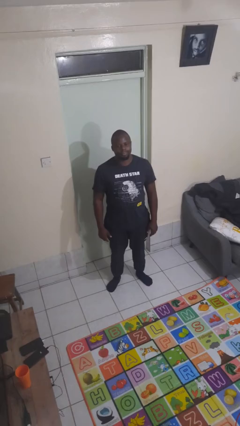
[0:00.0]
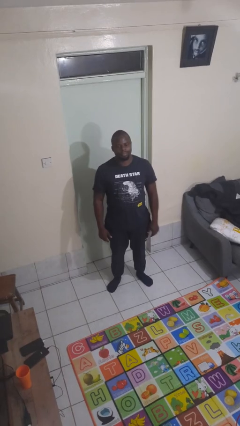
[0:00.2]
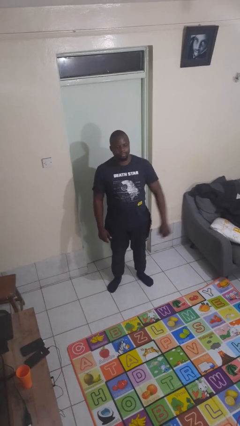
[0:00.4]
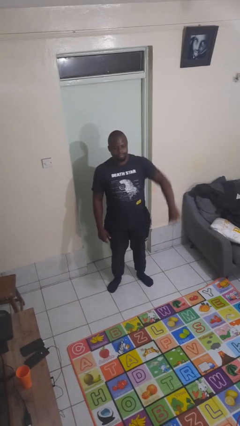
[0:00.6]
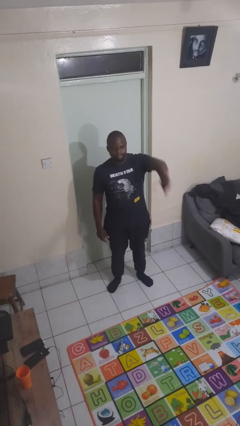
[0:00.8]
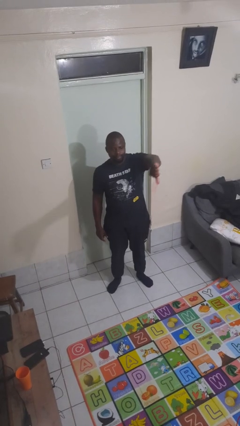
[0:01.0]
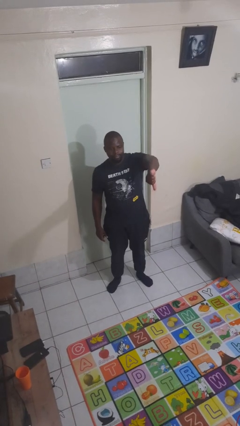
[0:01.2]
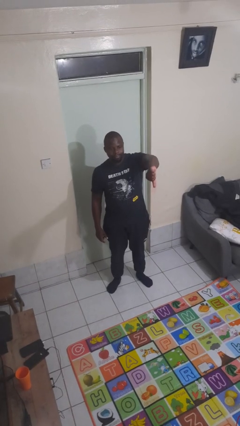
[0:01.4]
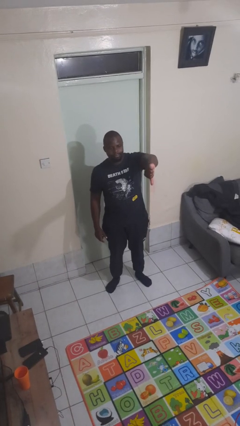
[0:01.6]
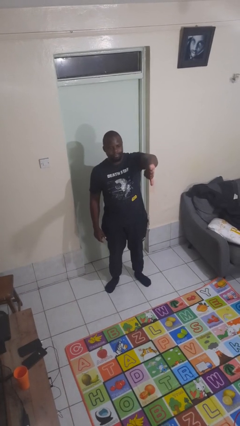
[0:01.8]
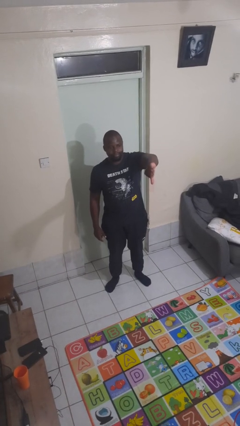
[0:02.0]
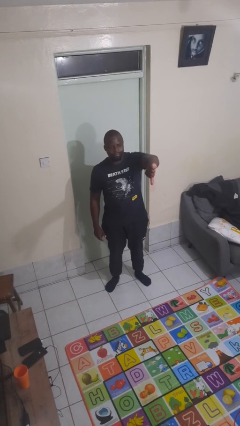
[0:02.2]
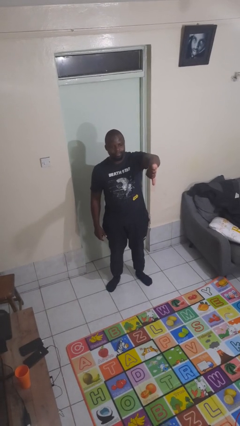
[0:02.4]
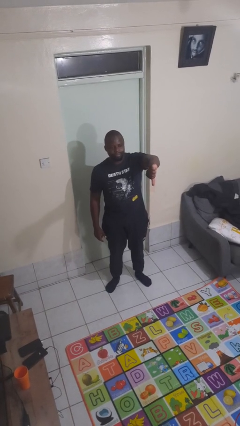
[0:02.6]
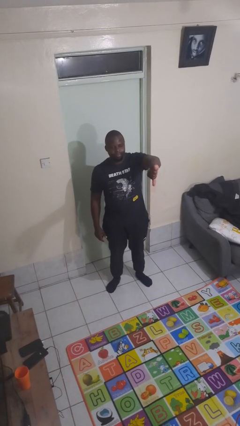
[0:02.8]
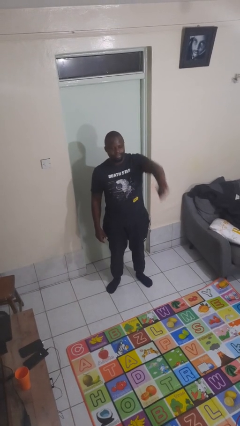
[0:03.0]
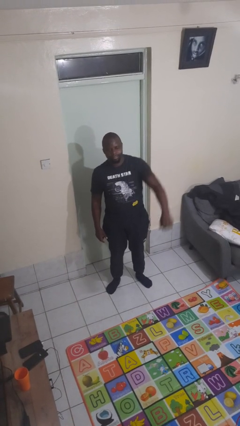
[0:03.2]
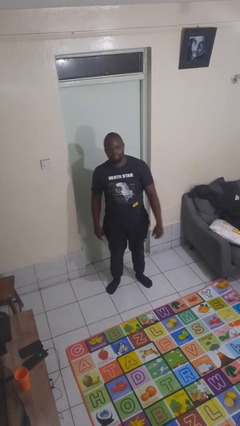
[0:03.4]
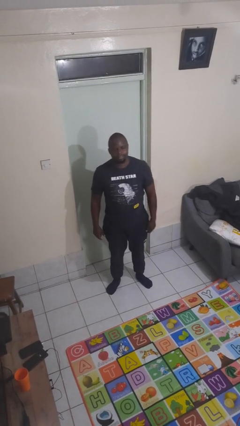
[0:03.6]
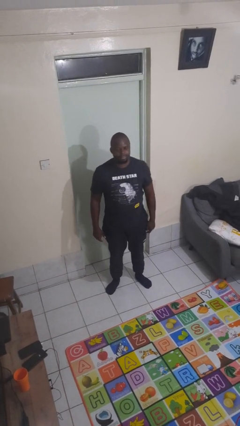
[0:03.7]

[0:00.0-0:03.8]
person gestures thumbs down

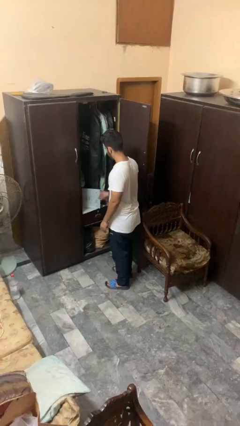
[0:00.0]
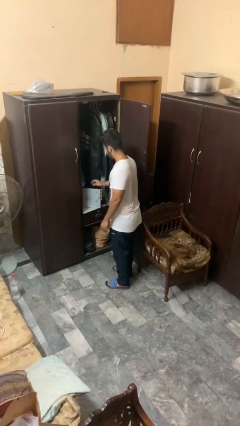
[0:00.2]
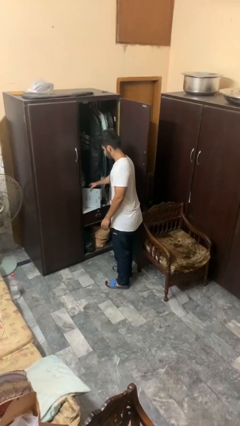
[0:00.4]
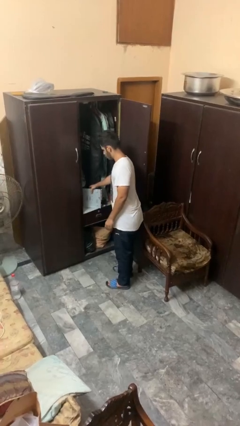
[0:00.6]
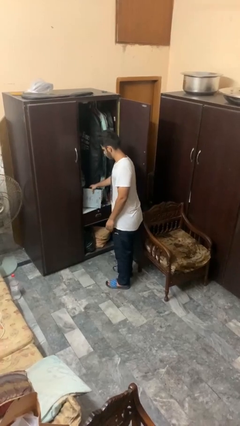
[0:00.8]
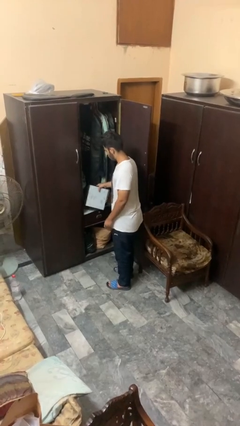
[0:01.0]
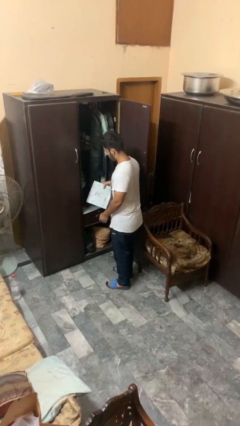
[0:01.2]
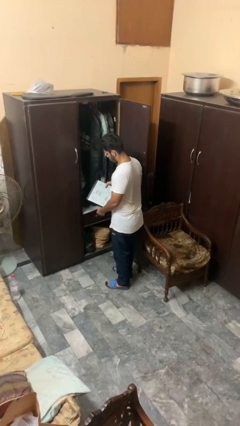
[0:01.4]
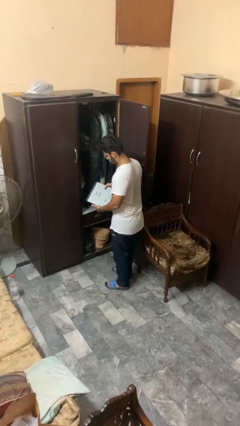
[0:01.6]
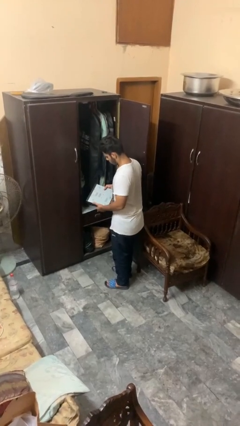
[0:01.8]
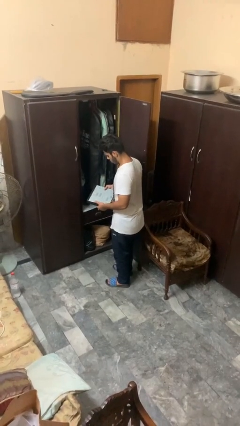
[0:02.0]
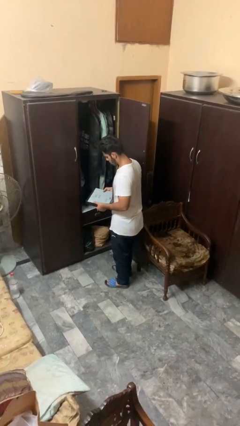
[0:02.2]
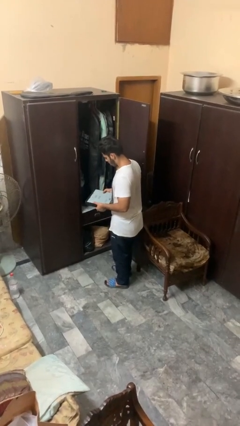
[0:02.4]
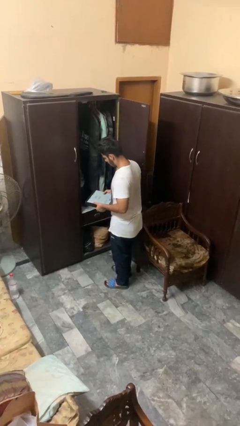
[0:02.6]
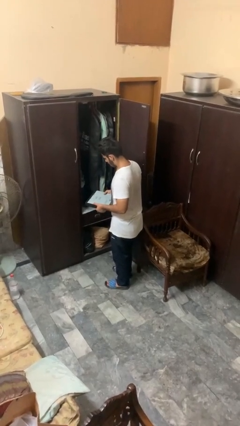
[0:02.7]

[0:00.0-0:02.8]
person picks up object from cabinet

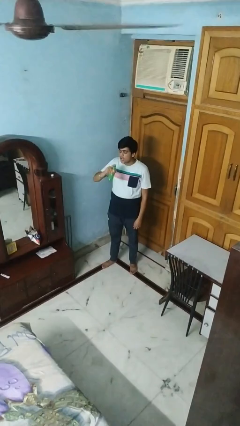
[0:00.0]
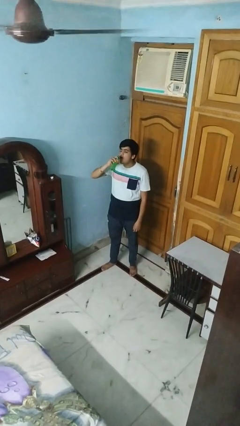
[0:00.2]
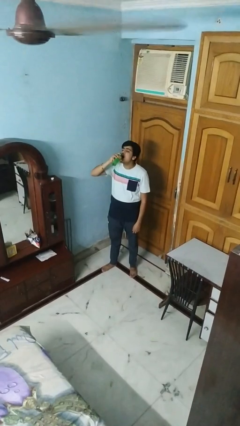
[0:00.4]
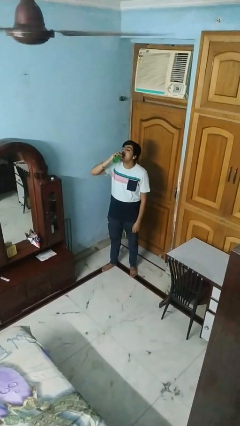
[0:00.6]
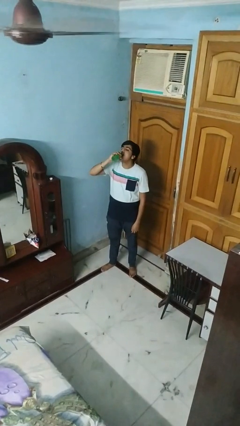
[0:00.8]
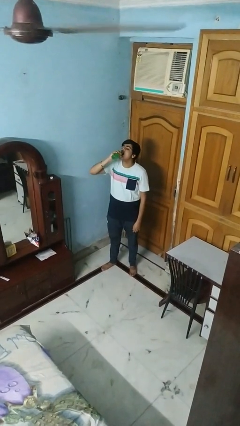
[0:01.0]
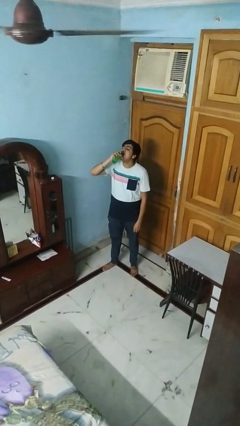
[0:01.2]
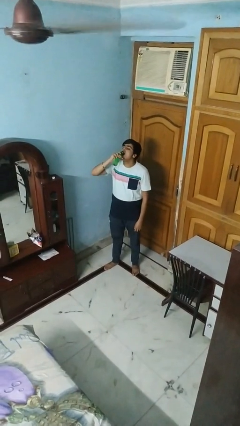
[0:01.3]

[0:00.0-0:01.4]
person drinks from bottle

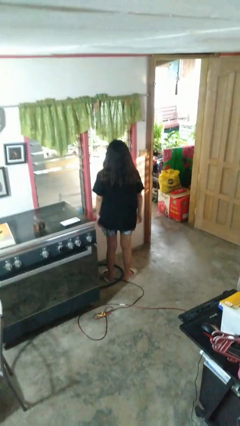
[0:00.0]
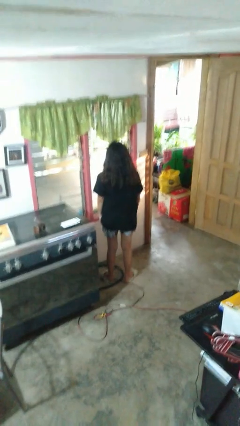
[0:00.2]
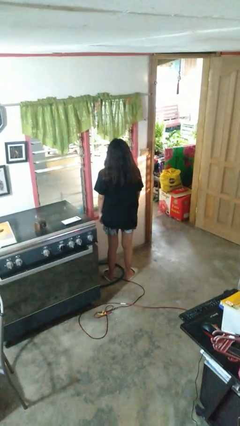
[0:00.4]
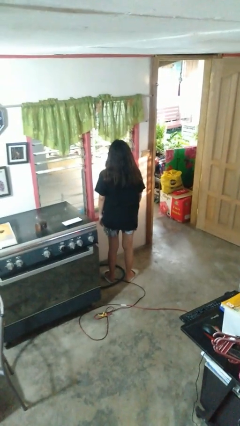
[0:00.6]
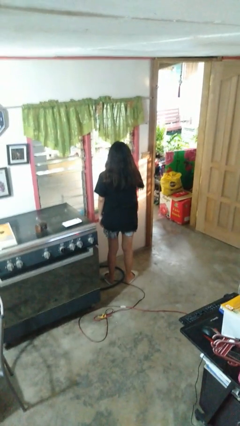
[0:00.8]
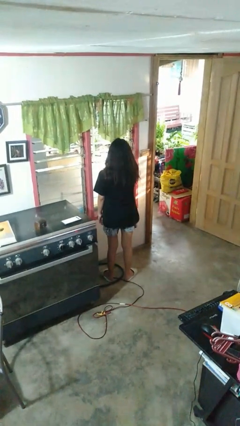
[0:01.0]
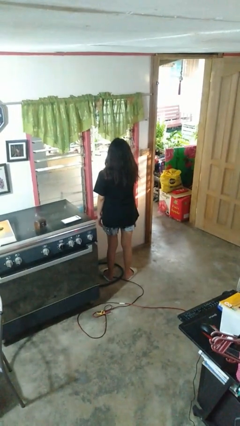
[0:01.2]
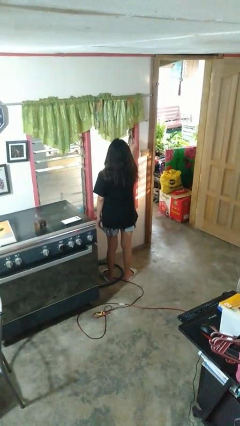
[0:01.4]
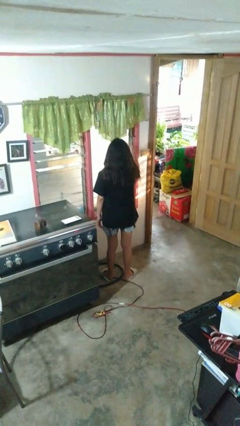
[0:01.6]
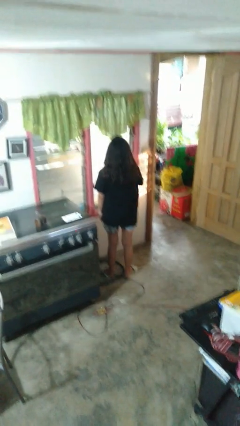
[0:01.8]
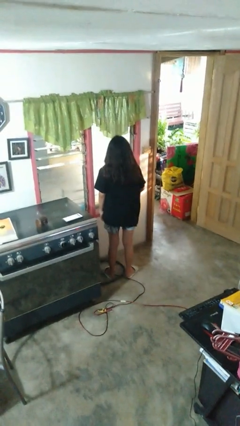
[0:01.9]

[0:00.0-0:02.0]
person closes home window

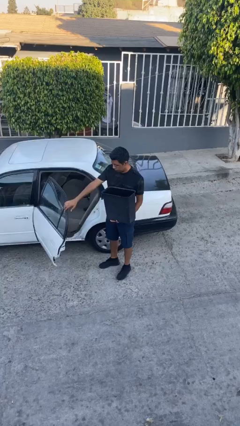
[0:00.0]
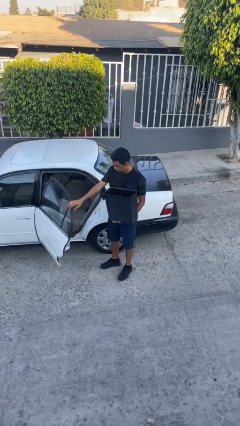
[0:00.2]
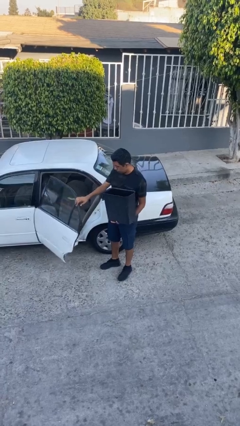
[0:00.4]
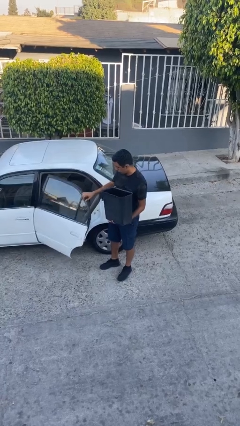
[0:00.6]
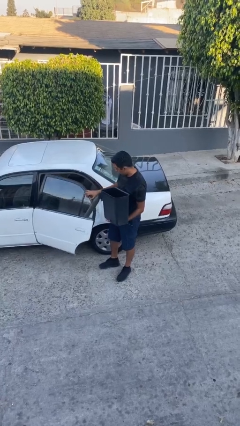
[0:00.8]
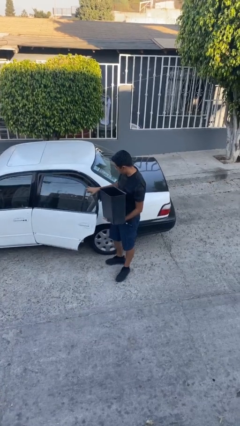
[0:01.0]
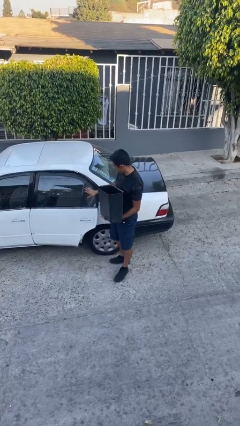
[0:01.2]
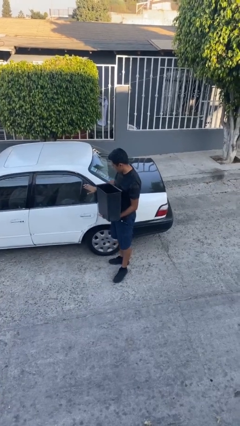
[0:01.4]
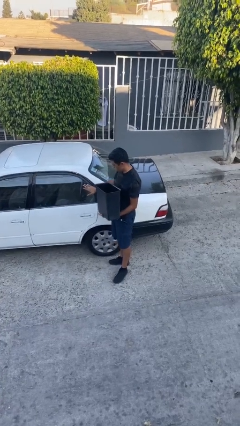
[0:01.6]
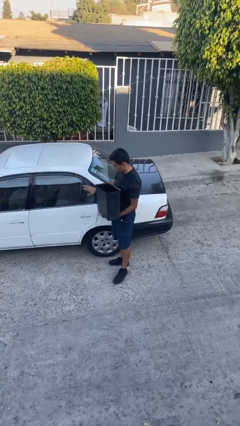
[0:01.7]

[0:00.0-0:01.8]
person closes car door

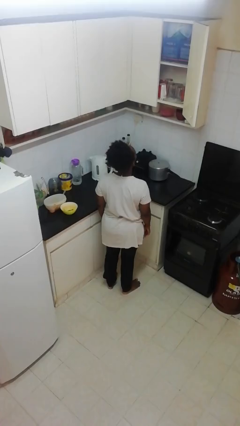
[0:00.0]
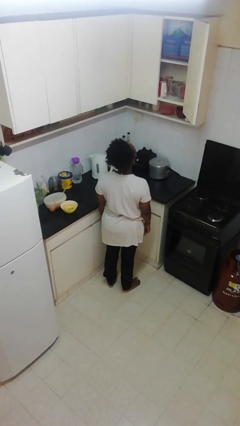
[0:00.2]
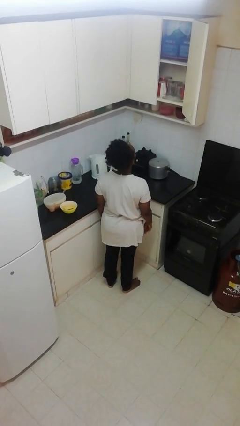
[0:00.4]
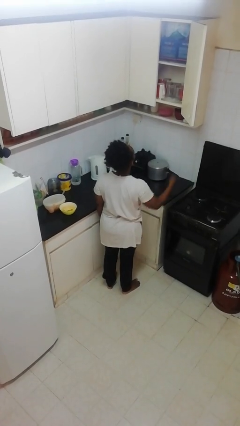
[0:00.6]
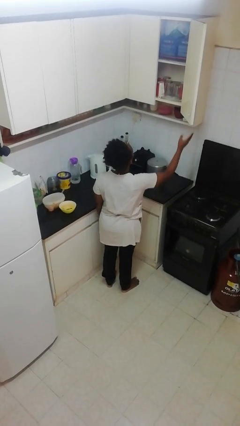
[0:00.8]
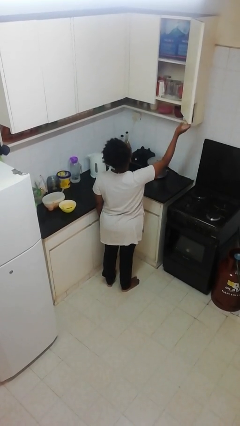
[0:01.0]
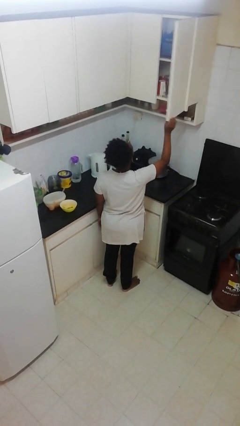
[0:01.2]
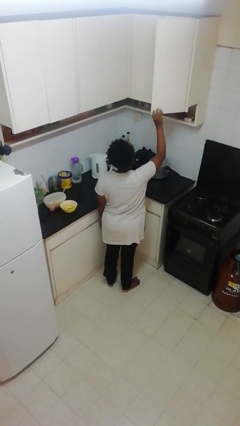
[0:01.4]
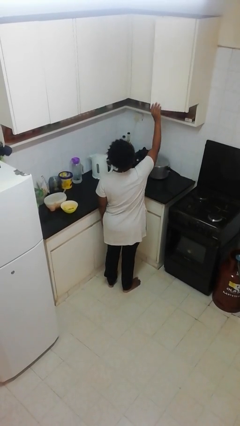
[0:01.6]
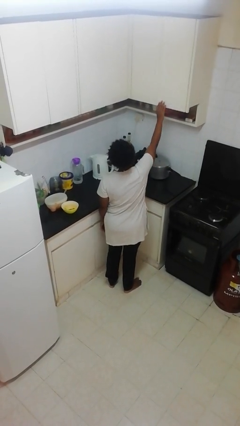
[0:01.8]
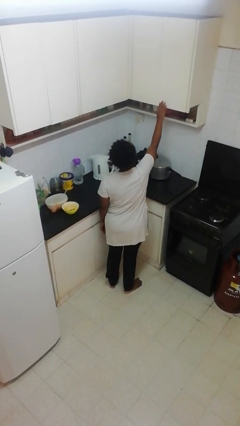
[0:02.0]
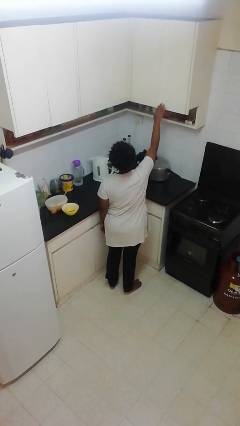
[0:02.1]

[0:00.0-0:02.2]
person closes cabinet

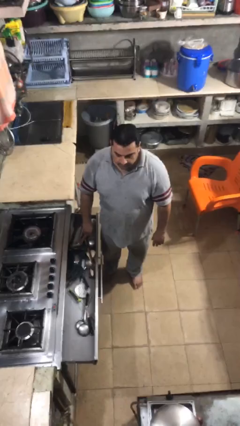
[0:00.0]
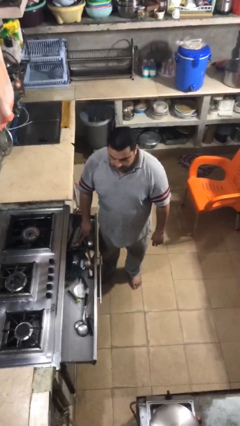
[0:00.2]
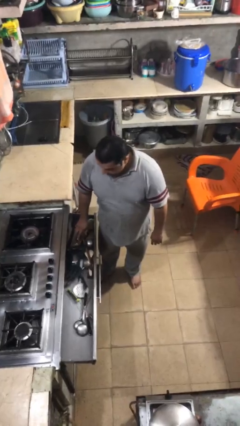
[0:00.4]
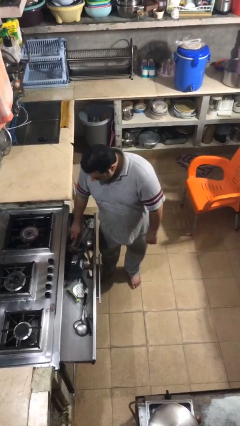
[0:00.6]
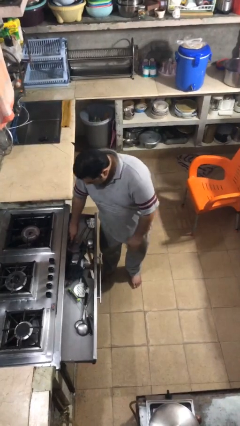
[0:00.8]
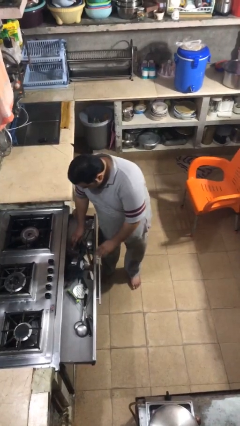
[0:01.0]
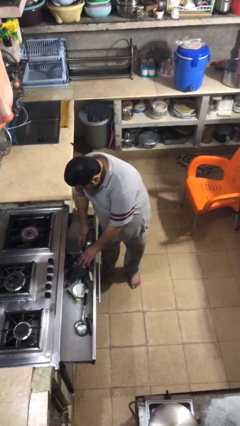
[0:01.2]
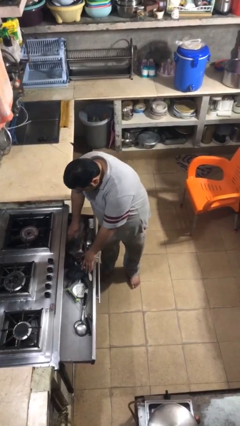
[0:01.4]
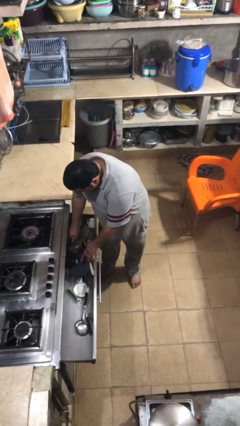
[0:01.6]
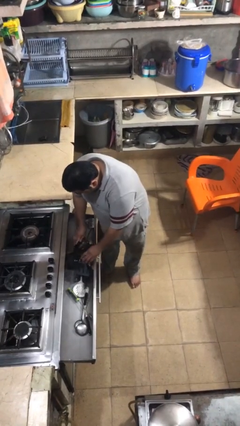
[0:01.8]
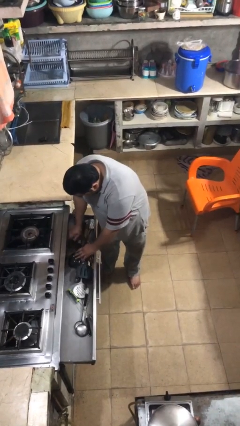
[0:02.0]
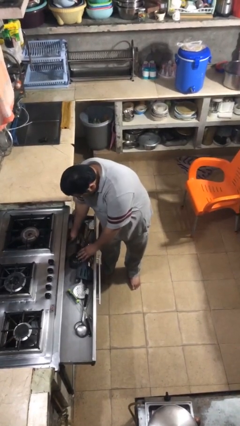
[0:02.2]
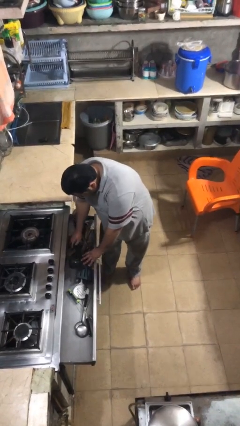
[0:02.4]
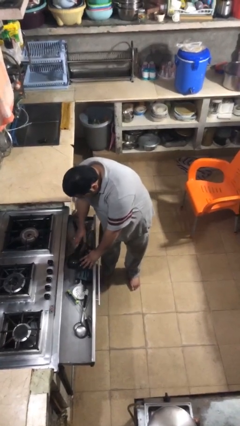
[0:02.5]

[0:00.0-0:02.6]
person searches in kitchen drawer
